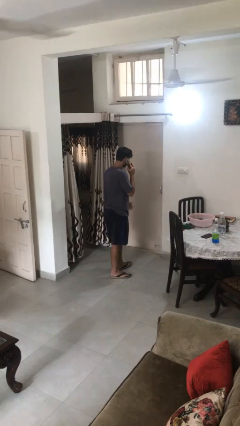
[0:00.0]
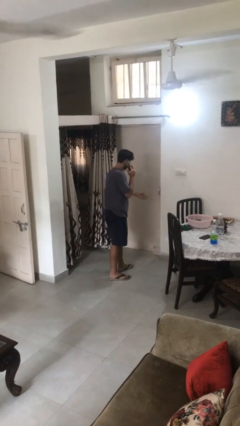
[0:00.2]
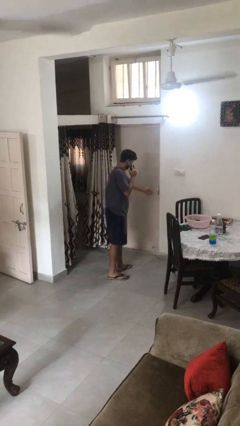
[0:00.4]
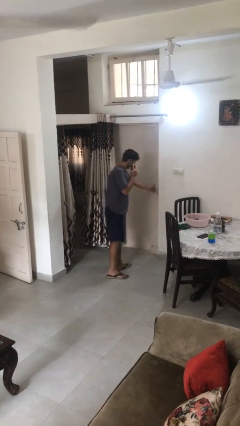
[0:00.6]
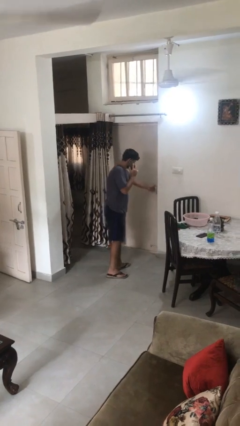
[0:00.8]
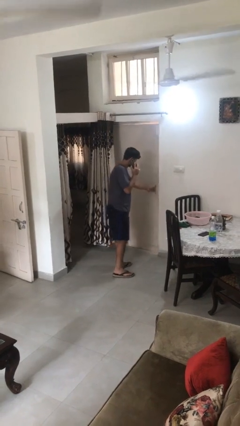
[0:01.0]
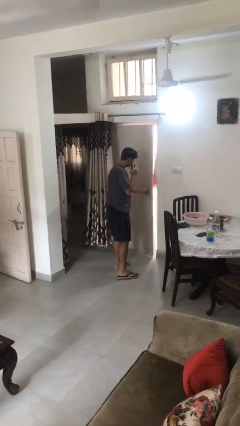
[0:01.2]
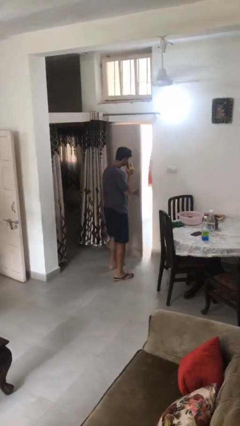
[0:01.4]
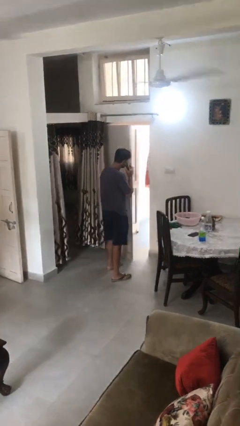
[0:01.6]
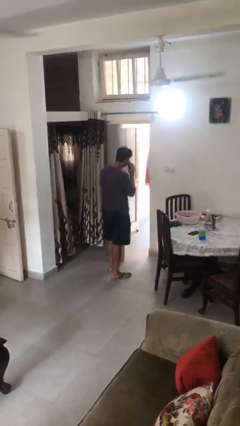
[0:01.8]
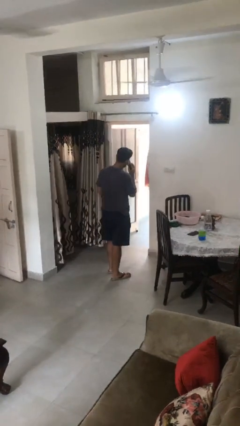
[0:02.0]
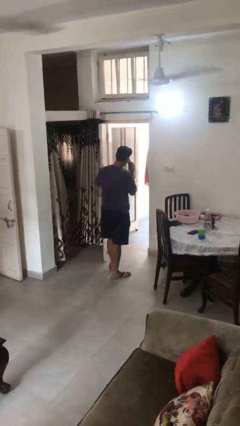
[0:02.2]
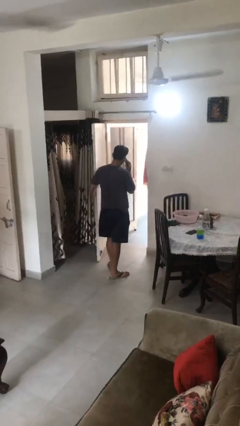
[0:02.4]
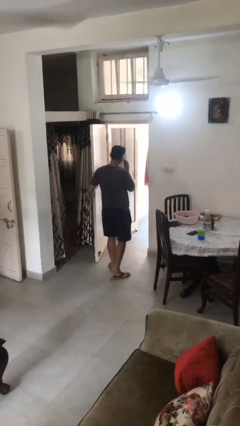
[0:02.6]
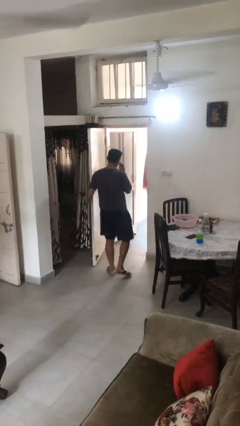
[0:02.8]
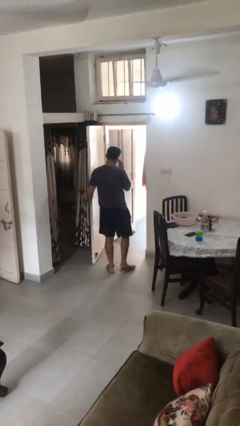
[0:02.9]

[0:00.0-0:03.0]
person opens facility door

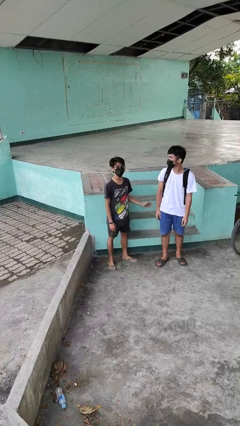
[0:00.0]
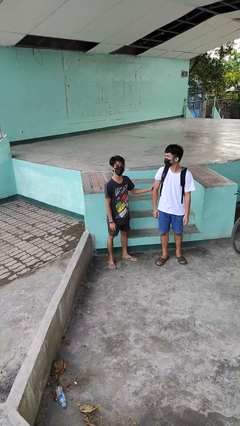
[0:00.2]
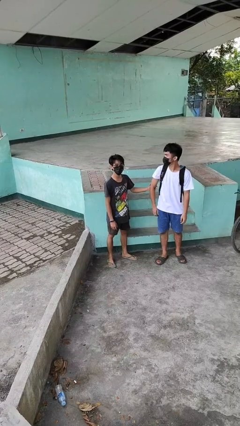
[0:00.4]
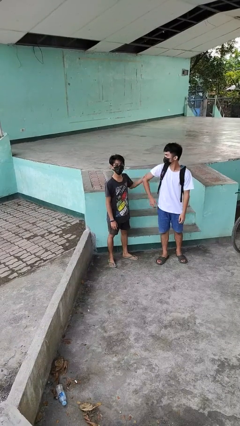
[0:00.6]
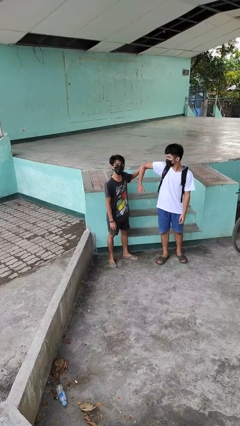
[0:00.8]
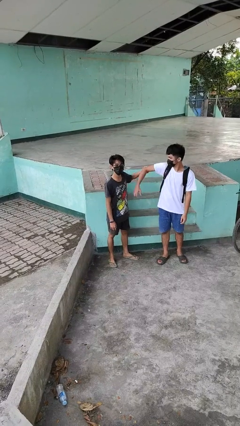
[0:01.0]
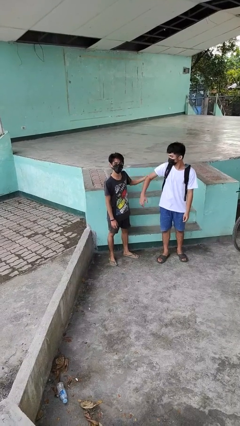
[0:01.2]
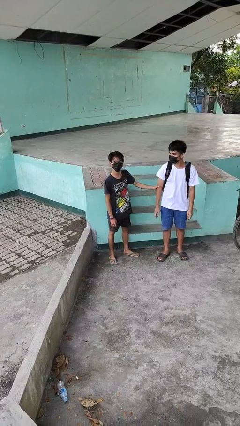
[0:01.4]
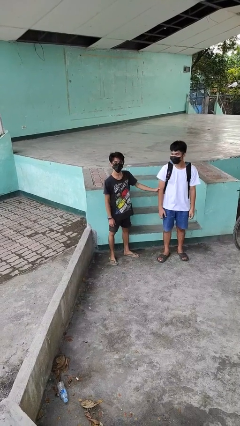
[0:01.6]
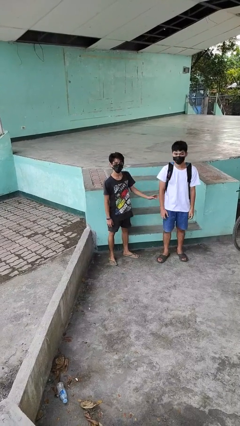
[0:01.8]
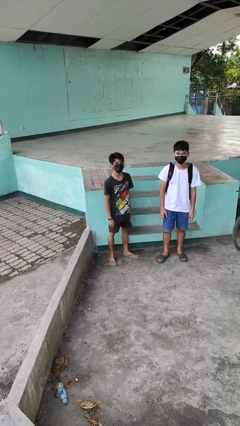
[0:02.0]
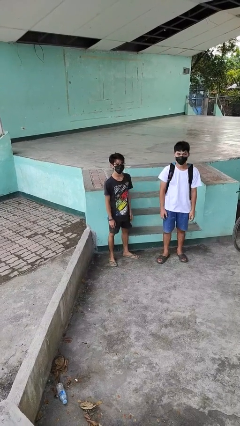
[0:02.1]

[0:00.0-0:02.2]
person grabs person by bicep

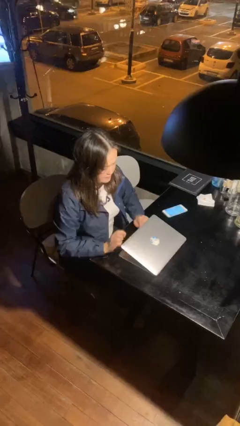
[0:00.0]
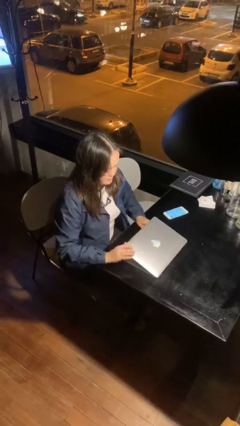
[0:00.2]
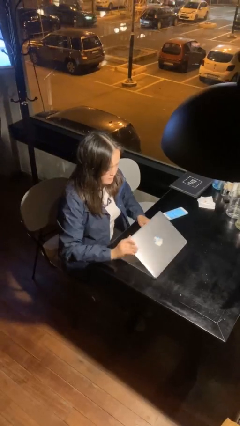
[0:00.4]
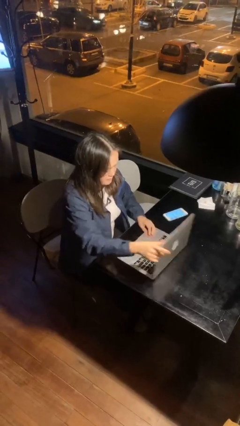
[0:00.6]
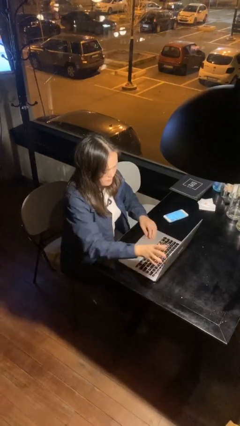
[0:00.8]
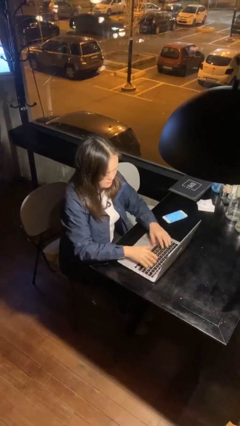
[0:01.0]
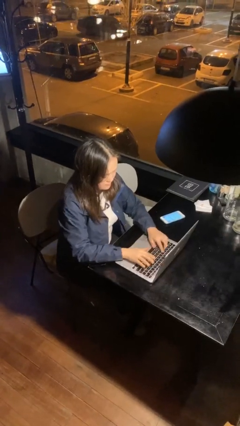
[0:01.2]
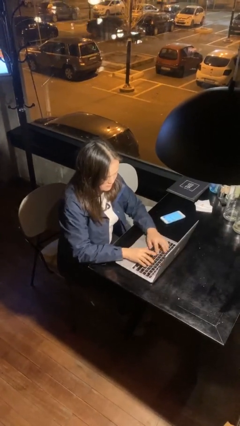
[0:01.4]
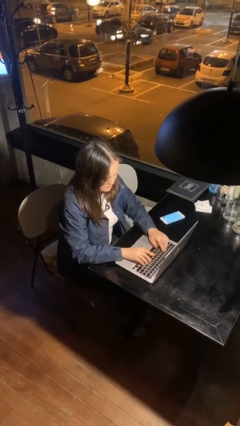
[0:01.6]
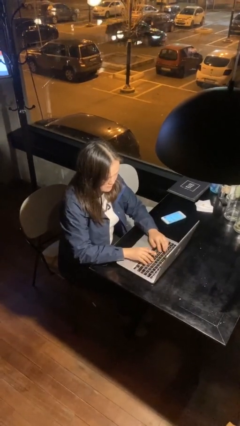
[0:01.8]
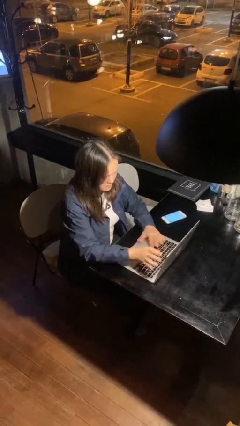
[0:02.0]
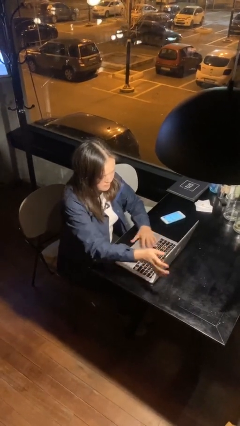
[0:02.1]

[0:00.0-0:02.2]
person interacts with laptop

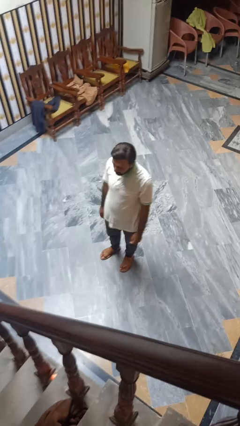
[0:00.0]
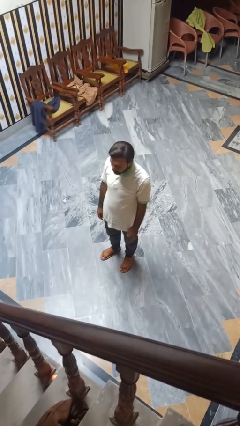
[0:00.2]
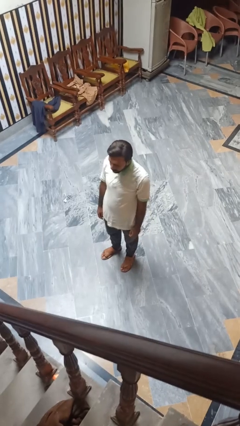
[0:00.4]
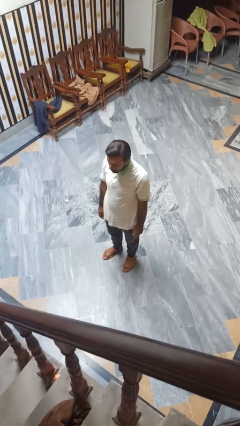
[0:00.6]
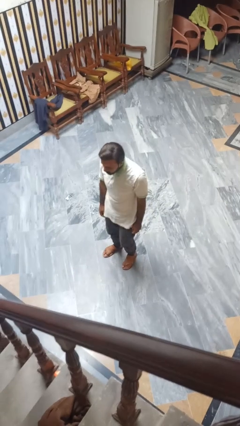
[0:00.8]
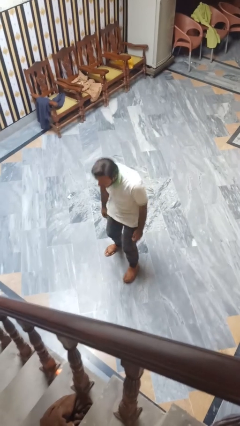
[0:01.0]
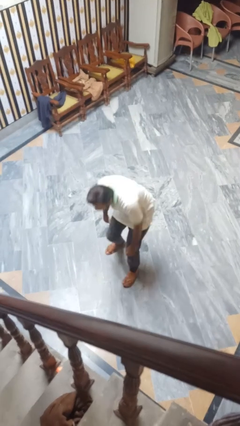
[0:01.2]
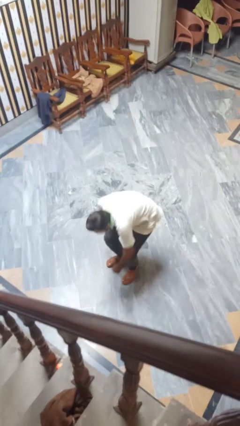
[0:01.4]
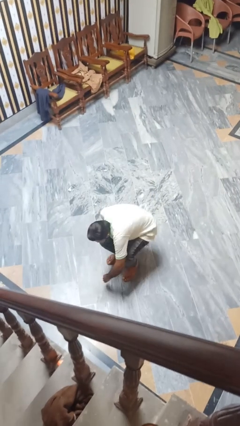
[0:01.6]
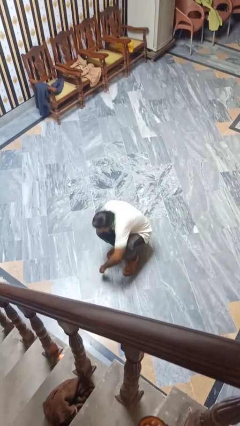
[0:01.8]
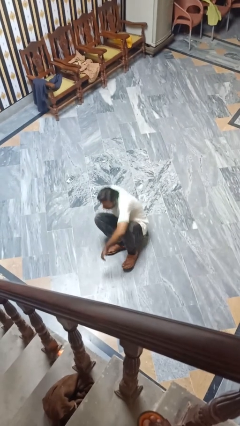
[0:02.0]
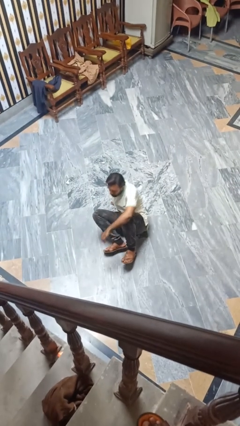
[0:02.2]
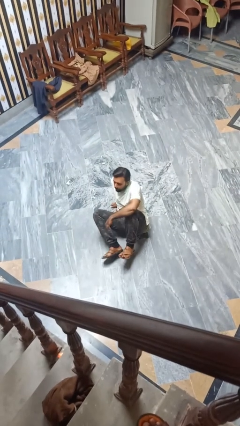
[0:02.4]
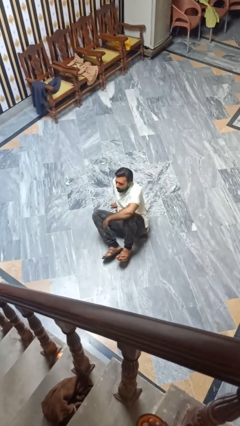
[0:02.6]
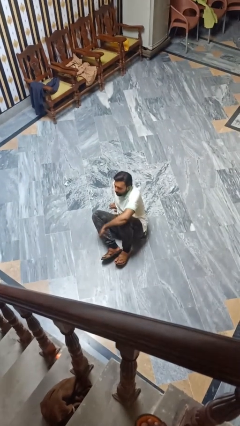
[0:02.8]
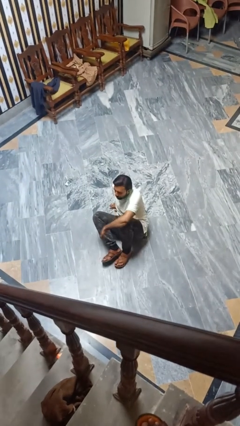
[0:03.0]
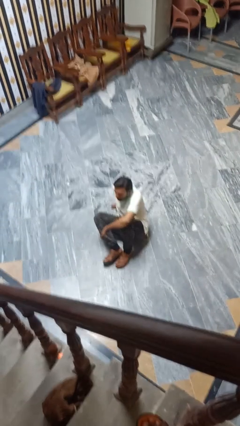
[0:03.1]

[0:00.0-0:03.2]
person falls while standing

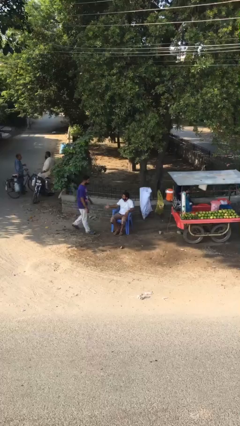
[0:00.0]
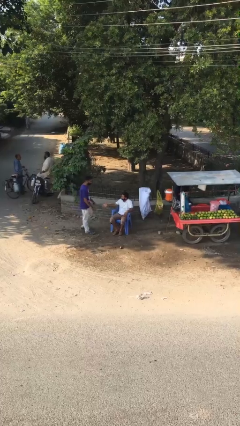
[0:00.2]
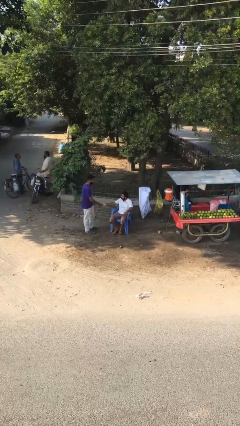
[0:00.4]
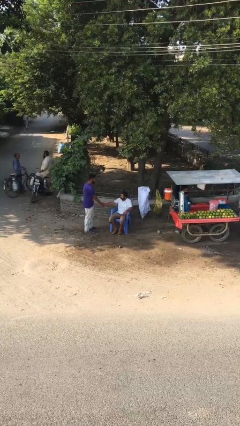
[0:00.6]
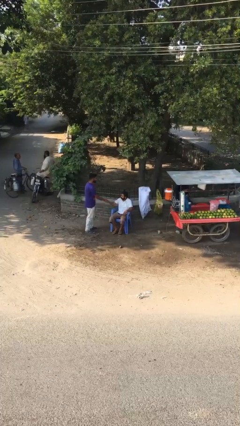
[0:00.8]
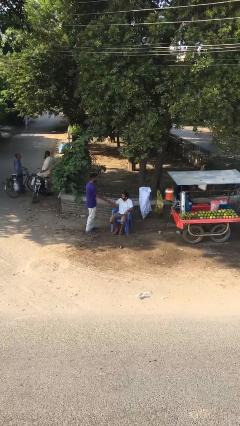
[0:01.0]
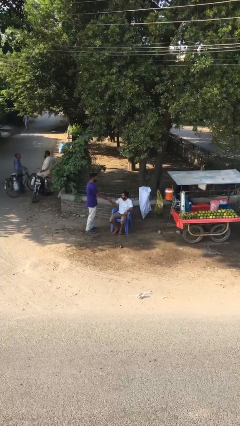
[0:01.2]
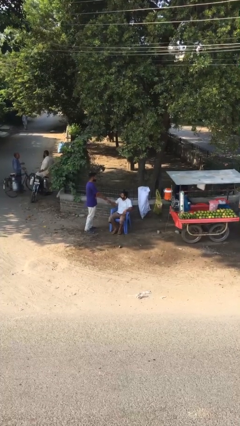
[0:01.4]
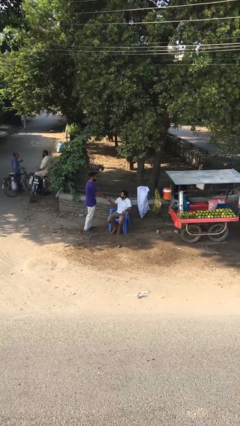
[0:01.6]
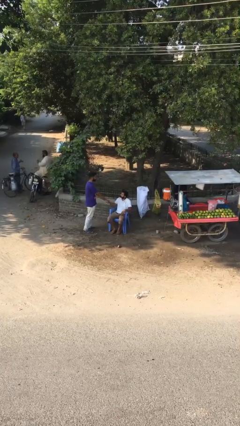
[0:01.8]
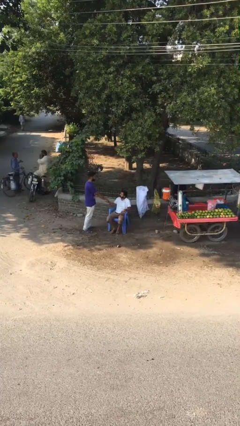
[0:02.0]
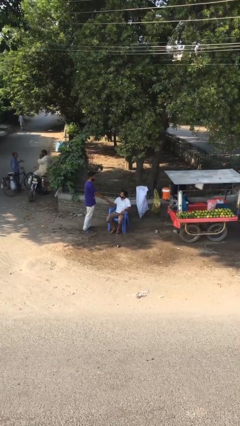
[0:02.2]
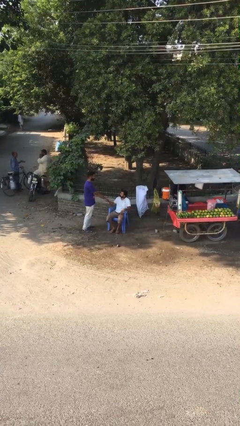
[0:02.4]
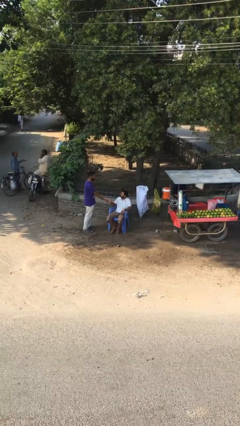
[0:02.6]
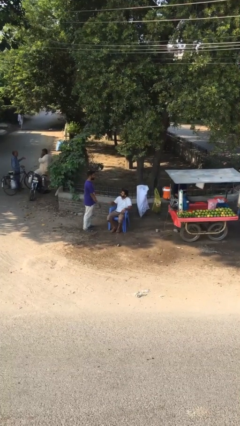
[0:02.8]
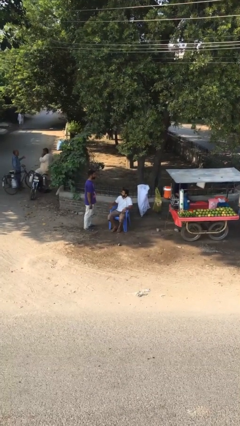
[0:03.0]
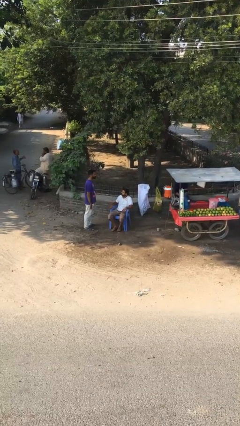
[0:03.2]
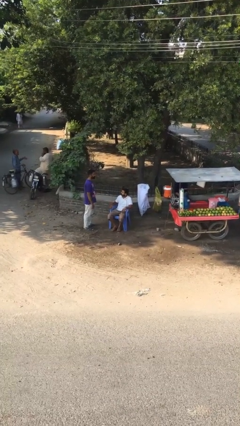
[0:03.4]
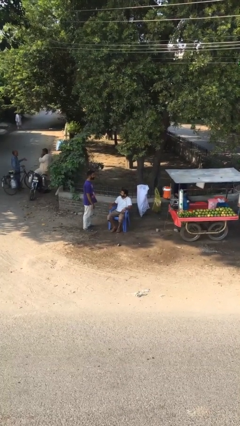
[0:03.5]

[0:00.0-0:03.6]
person shakes hand

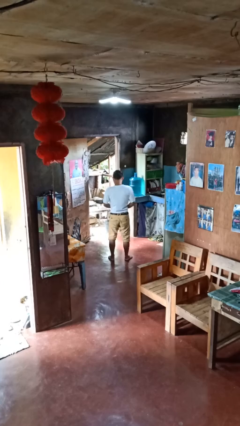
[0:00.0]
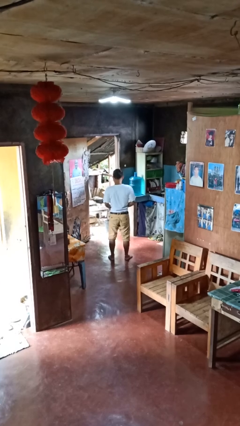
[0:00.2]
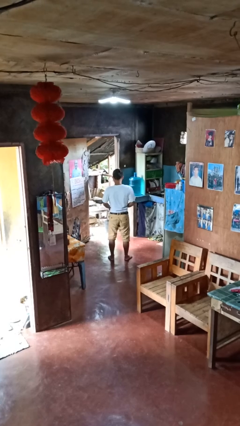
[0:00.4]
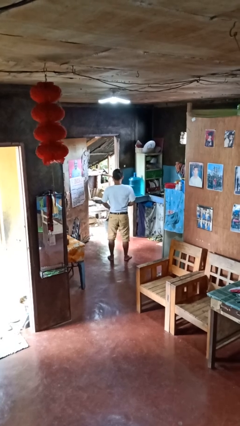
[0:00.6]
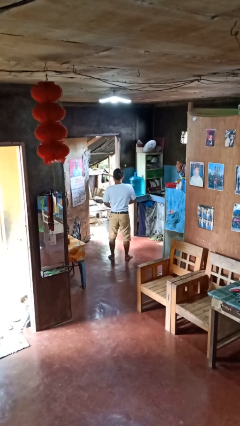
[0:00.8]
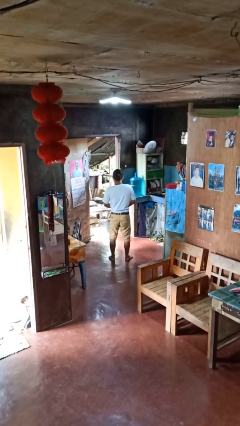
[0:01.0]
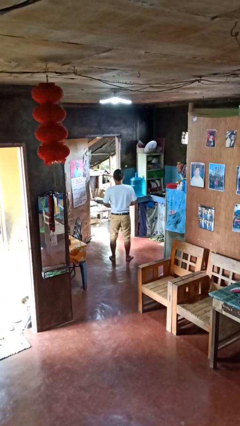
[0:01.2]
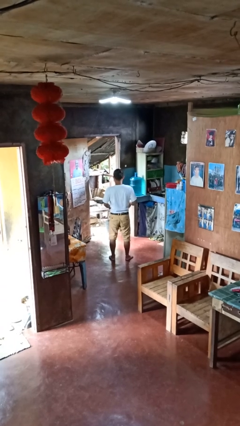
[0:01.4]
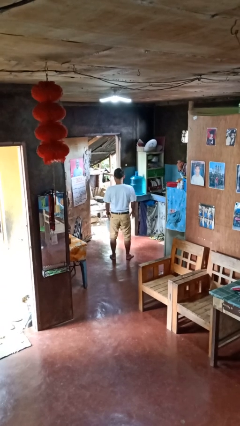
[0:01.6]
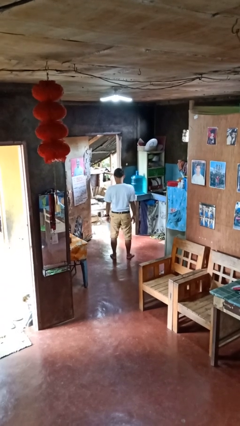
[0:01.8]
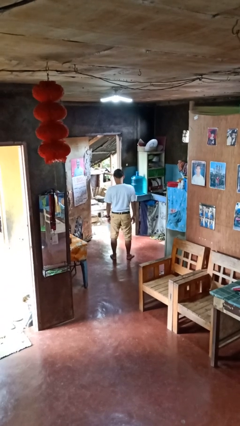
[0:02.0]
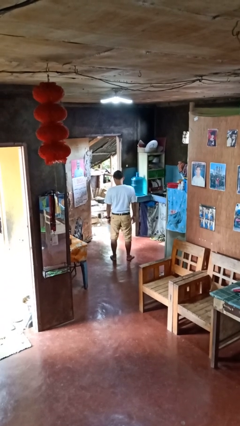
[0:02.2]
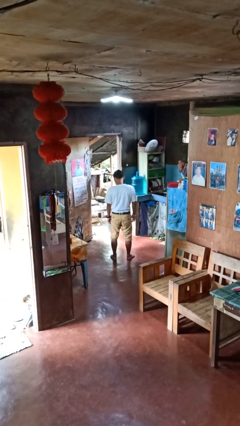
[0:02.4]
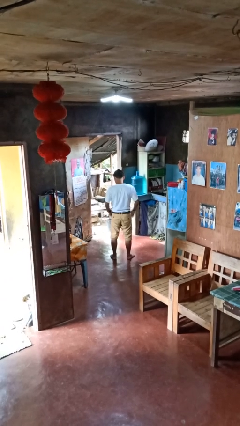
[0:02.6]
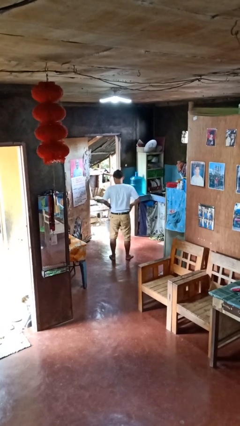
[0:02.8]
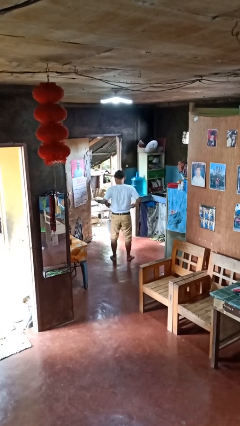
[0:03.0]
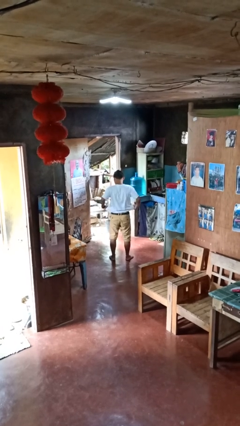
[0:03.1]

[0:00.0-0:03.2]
person tucks in shirt

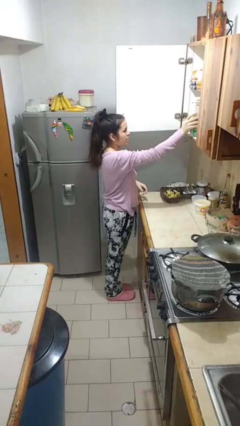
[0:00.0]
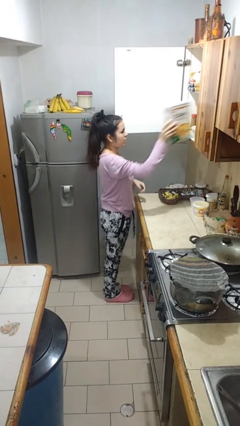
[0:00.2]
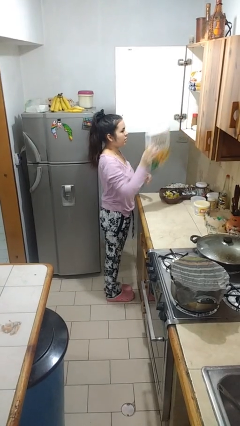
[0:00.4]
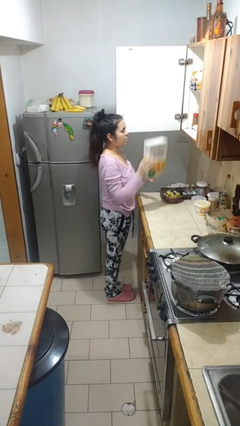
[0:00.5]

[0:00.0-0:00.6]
person takes object from cabinet
